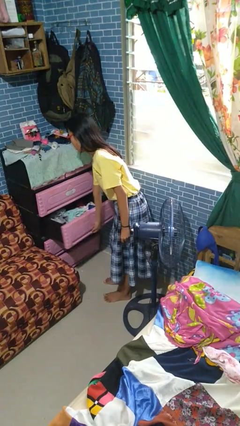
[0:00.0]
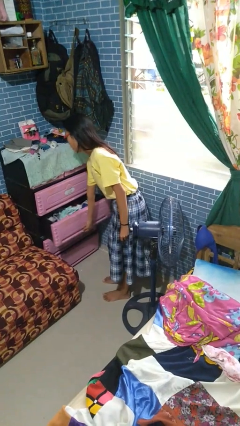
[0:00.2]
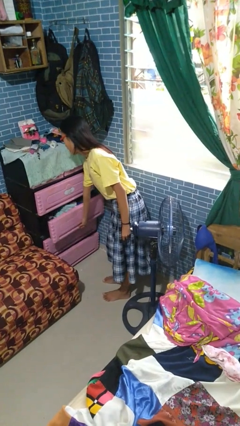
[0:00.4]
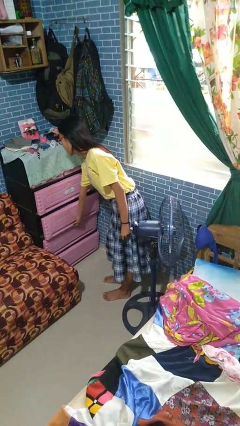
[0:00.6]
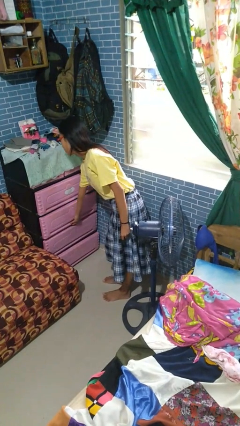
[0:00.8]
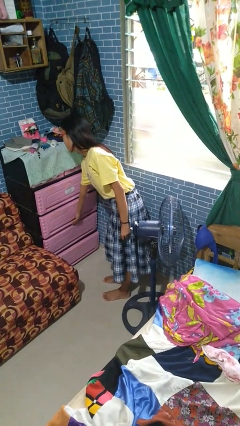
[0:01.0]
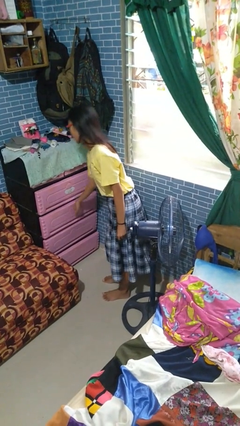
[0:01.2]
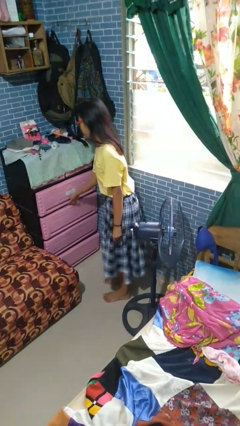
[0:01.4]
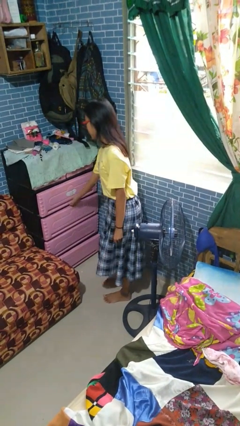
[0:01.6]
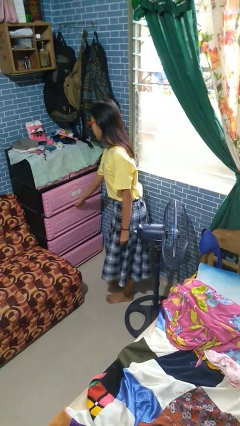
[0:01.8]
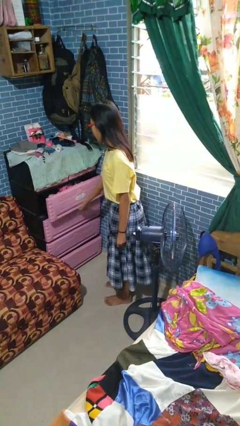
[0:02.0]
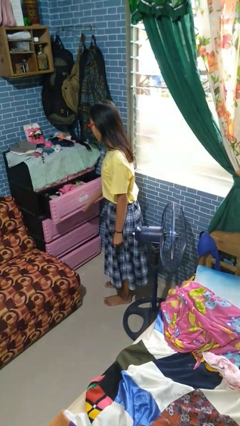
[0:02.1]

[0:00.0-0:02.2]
person closes dresser drawer

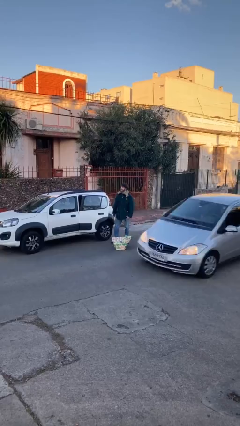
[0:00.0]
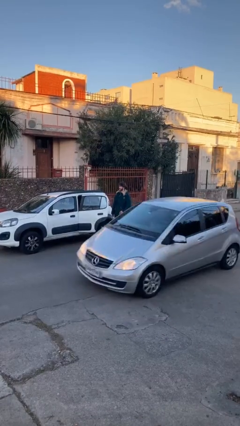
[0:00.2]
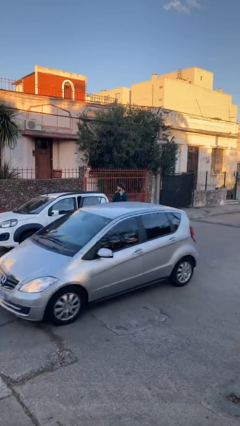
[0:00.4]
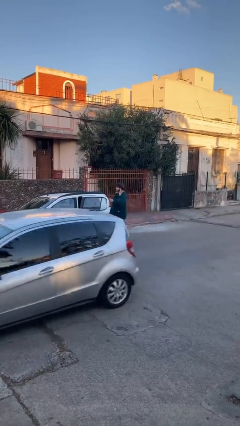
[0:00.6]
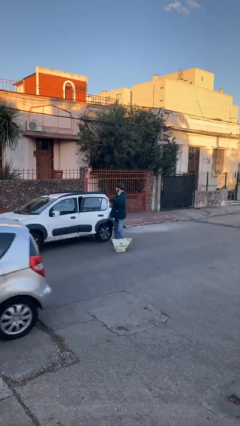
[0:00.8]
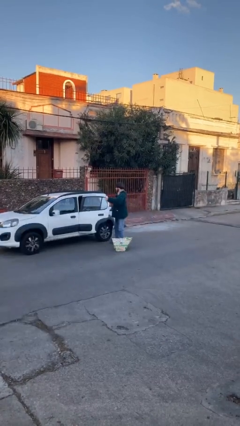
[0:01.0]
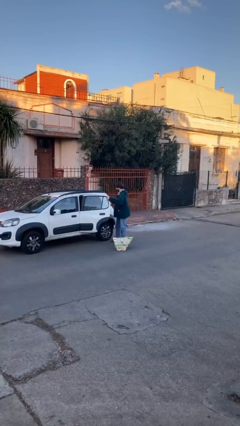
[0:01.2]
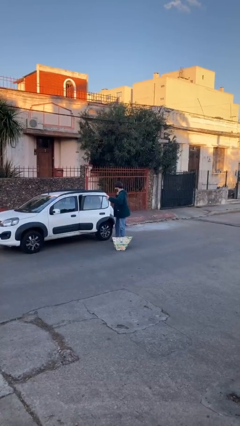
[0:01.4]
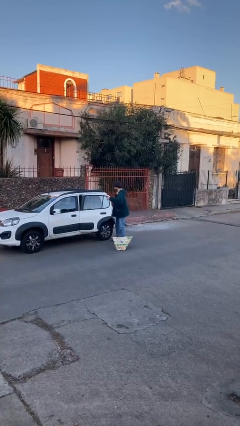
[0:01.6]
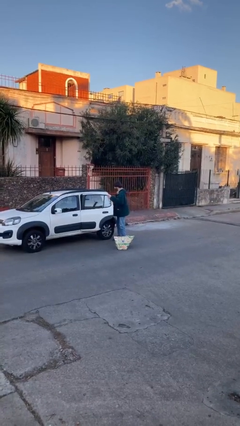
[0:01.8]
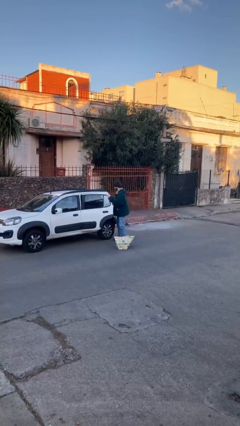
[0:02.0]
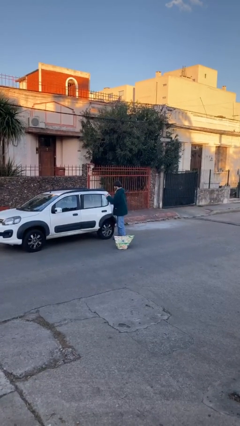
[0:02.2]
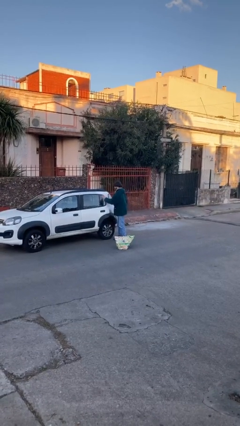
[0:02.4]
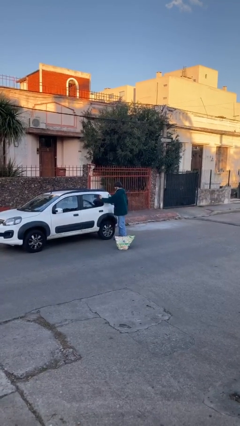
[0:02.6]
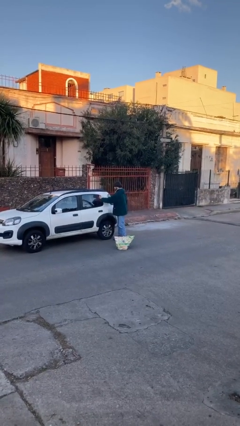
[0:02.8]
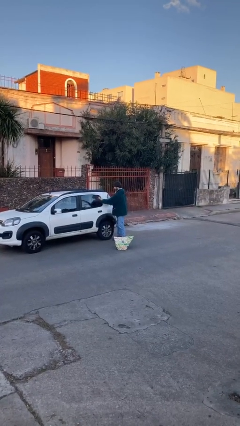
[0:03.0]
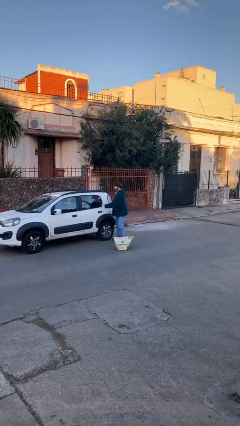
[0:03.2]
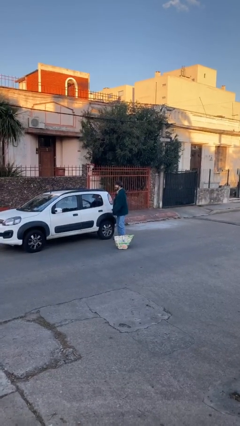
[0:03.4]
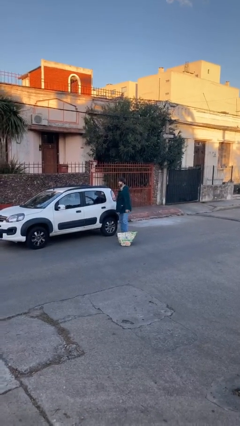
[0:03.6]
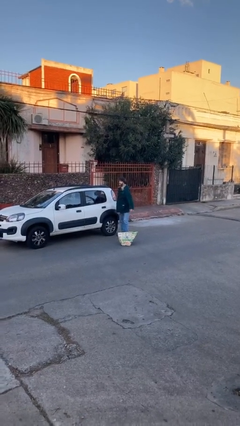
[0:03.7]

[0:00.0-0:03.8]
person closes car door

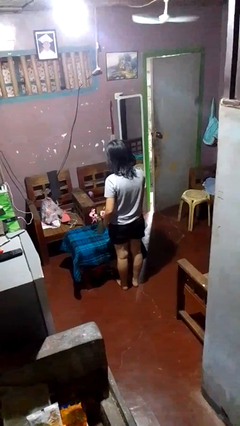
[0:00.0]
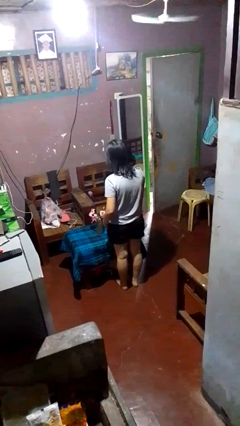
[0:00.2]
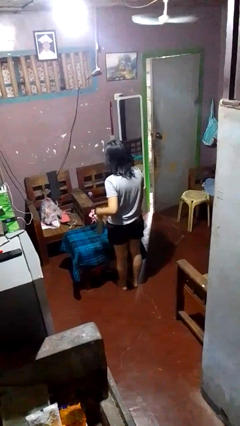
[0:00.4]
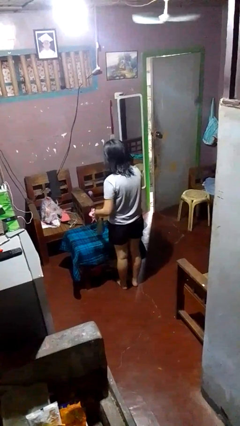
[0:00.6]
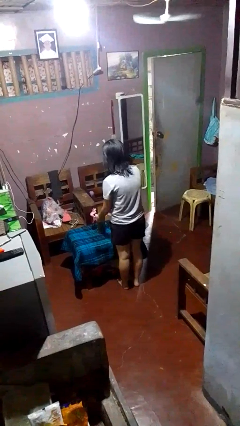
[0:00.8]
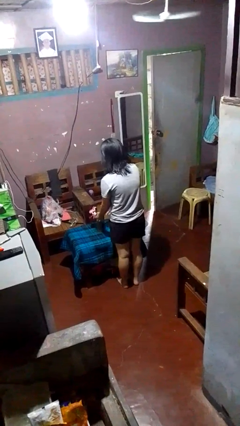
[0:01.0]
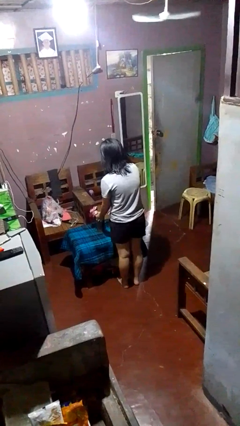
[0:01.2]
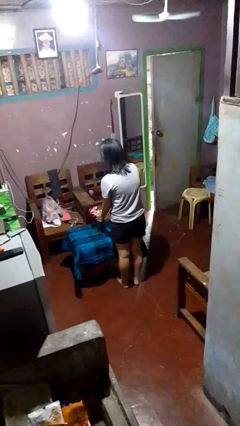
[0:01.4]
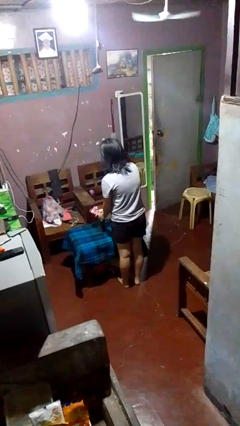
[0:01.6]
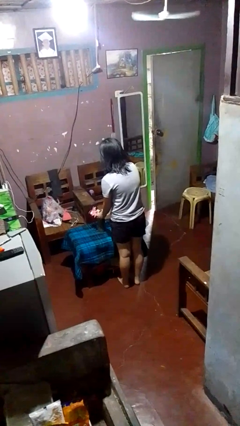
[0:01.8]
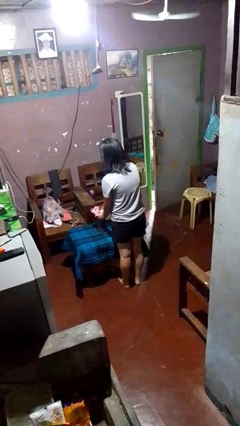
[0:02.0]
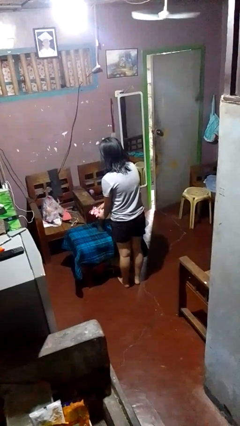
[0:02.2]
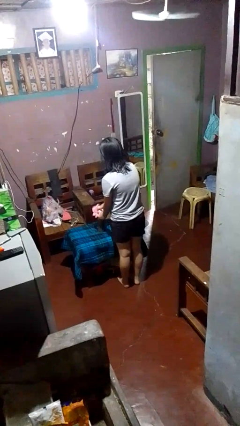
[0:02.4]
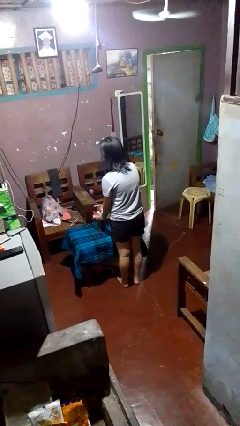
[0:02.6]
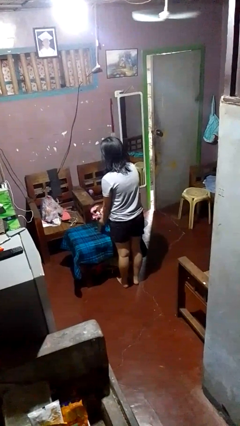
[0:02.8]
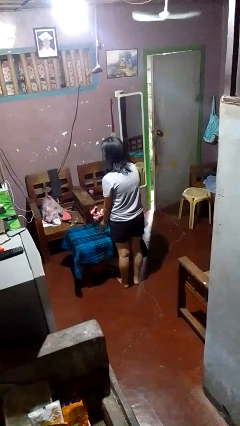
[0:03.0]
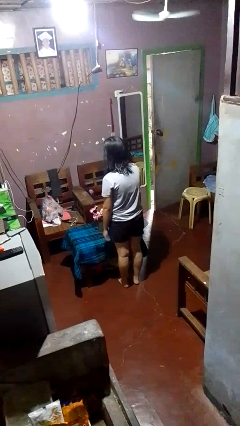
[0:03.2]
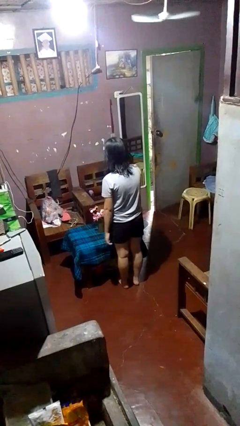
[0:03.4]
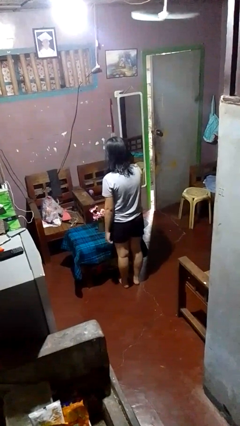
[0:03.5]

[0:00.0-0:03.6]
person arranges flowers in vase

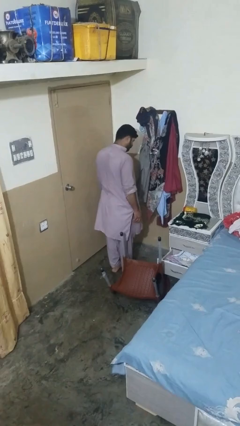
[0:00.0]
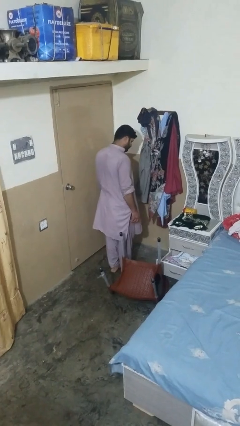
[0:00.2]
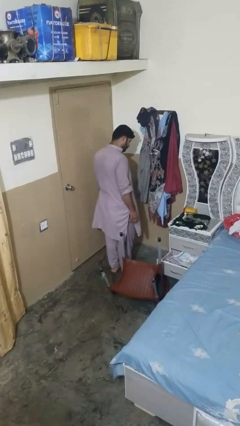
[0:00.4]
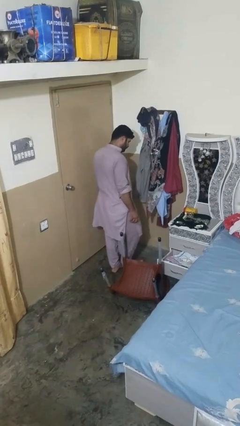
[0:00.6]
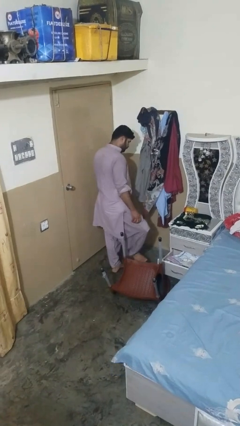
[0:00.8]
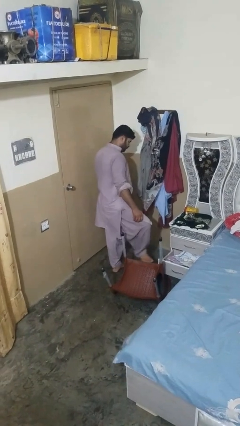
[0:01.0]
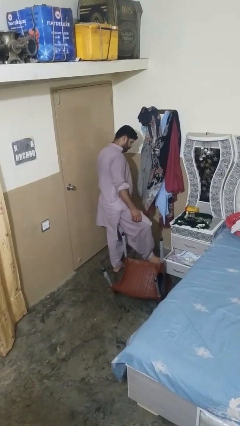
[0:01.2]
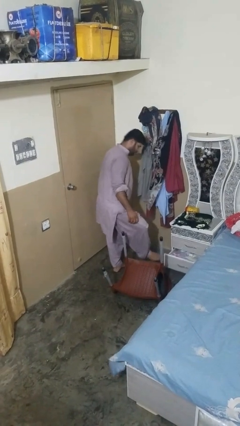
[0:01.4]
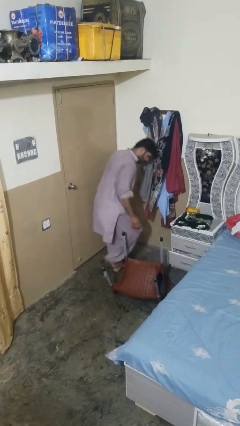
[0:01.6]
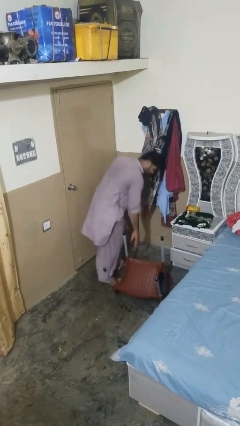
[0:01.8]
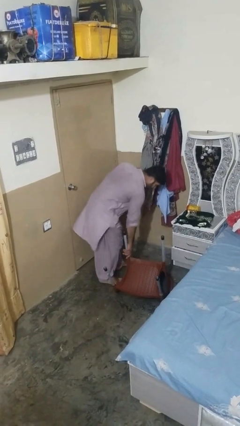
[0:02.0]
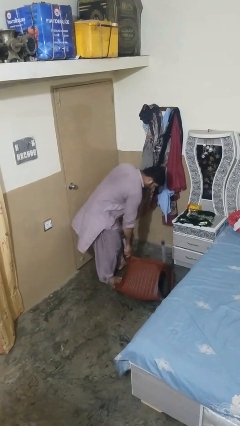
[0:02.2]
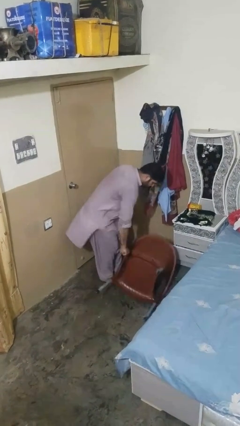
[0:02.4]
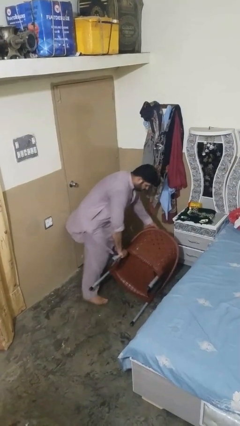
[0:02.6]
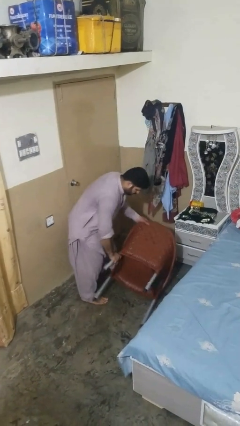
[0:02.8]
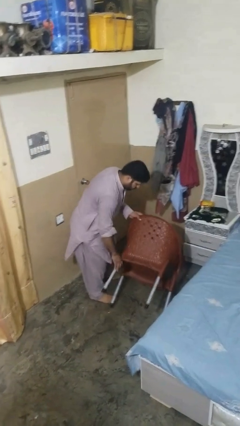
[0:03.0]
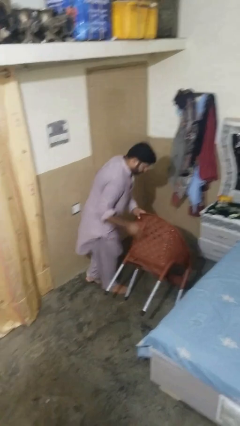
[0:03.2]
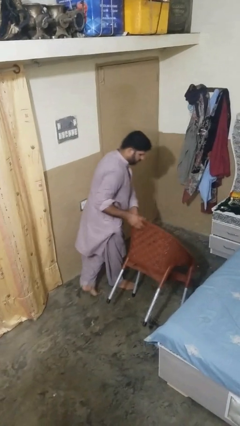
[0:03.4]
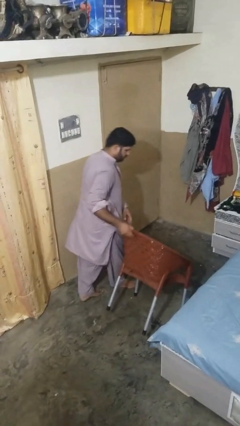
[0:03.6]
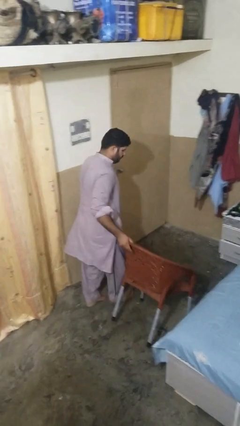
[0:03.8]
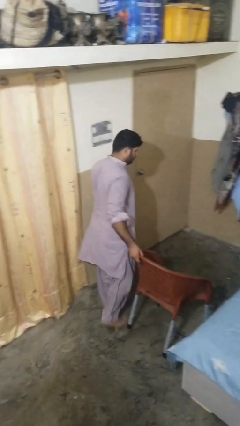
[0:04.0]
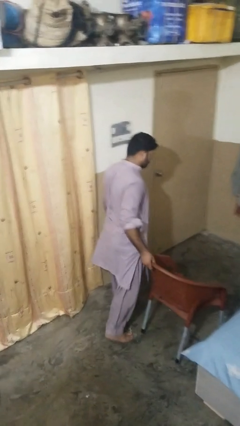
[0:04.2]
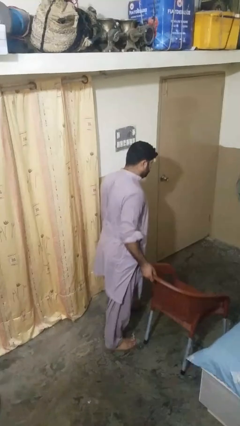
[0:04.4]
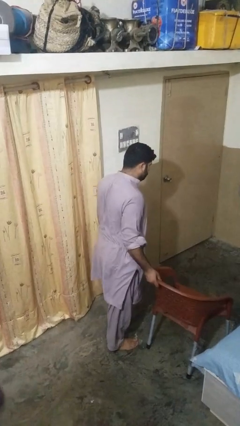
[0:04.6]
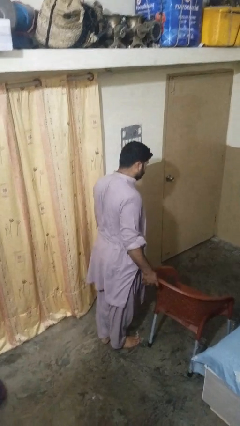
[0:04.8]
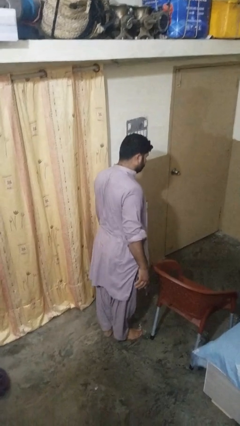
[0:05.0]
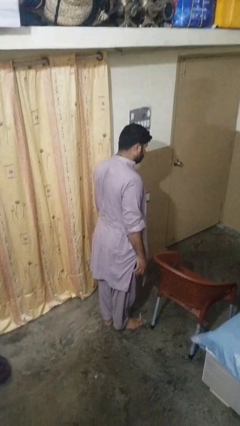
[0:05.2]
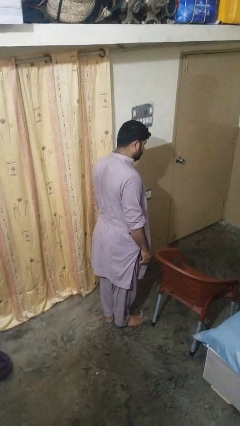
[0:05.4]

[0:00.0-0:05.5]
person sets upright furniture

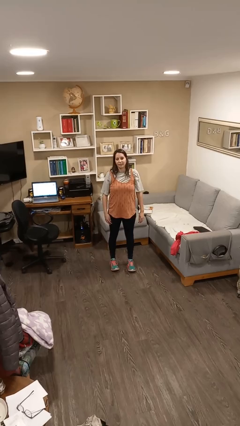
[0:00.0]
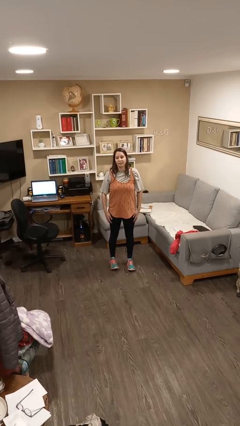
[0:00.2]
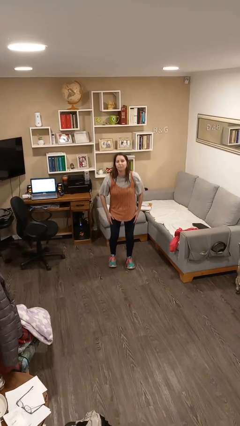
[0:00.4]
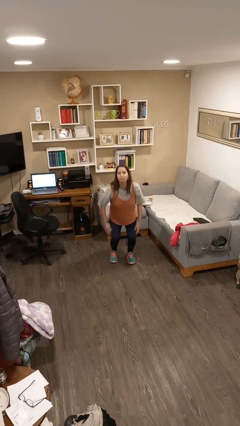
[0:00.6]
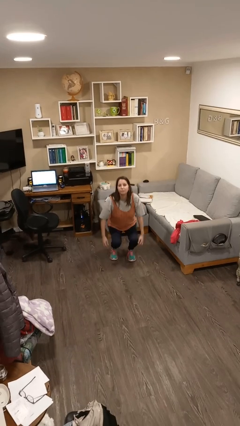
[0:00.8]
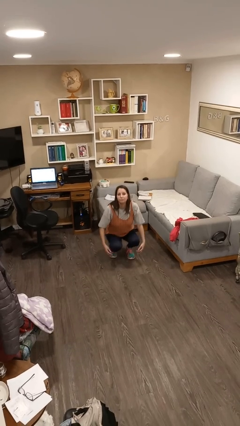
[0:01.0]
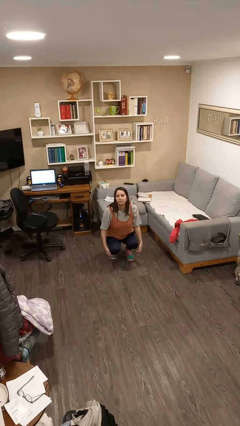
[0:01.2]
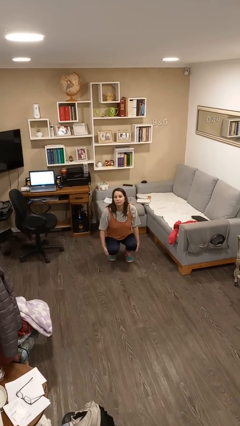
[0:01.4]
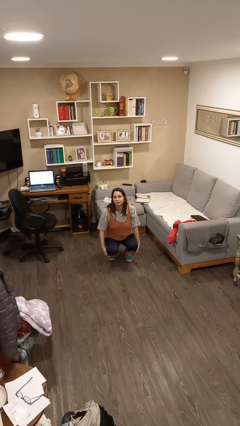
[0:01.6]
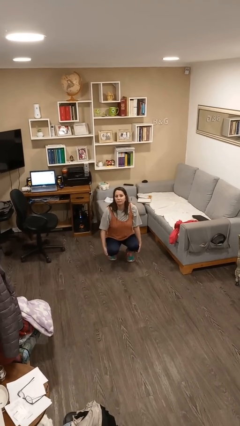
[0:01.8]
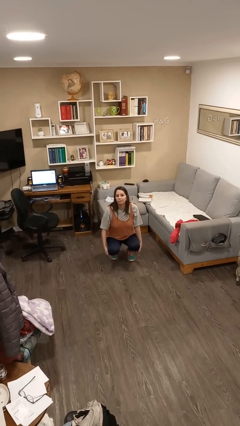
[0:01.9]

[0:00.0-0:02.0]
person squats

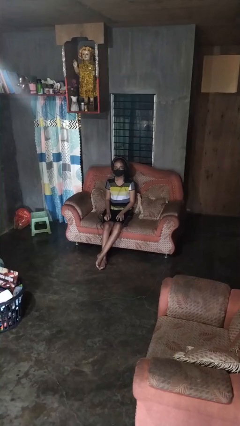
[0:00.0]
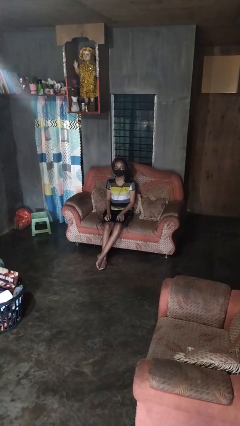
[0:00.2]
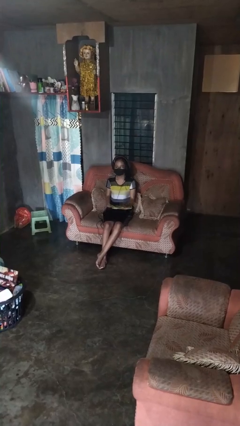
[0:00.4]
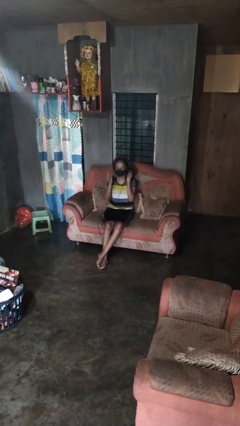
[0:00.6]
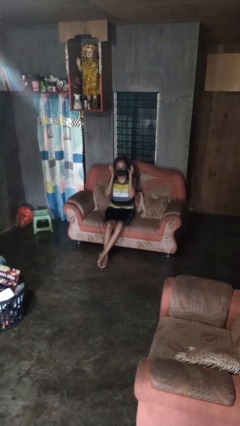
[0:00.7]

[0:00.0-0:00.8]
person takes off headphones
